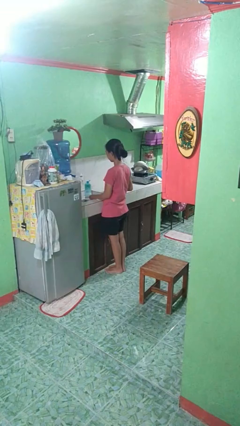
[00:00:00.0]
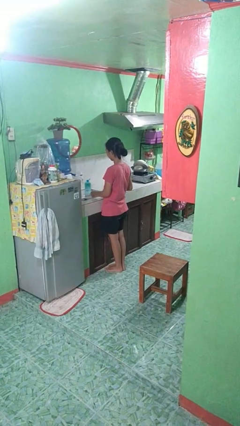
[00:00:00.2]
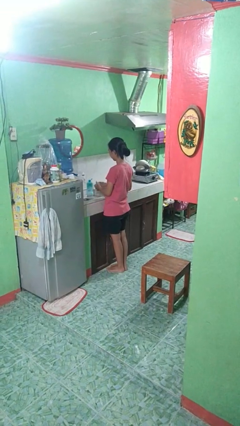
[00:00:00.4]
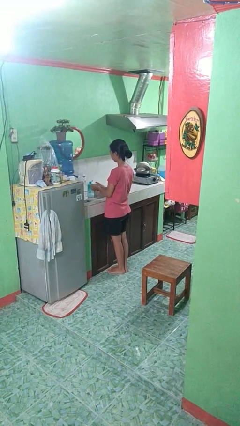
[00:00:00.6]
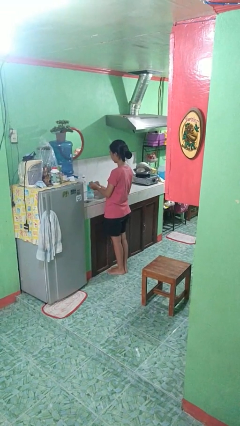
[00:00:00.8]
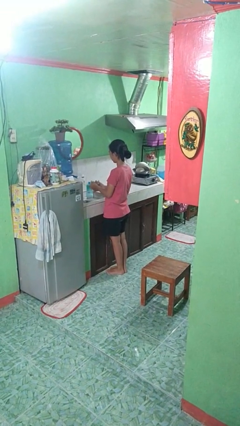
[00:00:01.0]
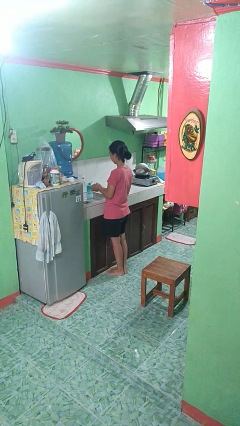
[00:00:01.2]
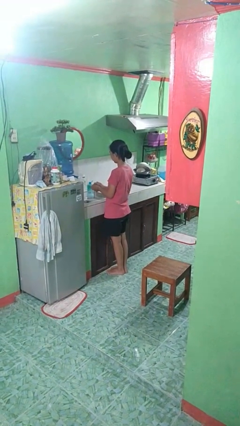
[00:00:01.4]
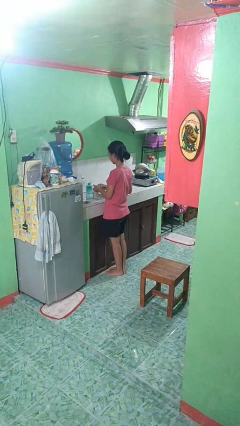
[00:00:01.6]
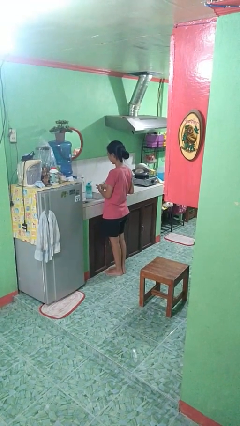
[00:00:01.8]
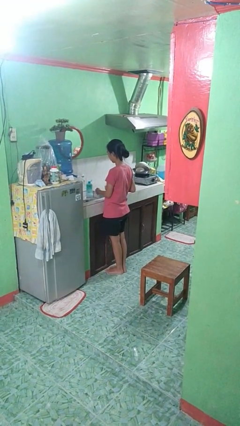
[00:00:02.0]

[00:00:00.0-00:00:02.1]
person dries hands with towel

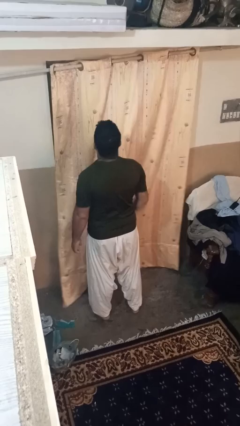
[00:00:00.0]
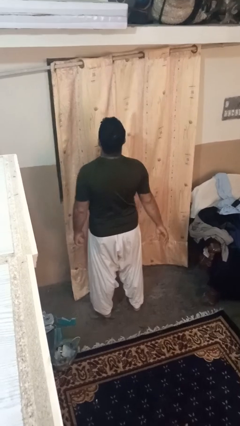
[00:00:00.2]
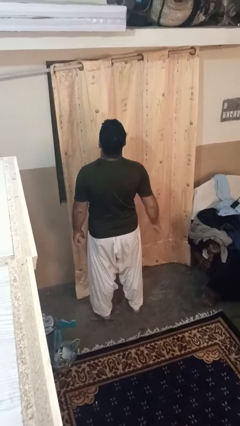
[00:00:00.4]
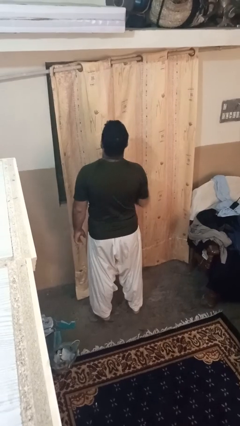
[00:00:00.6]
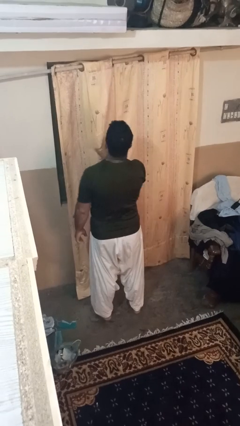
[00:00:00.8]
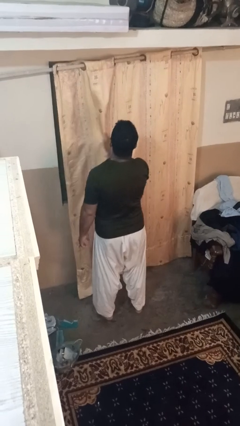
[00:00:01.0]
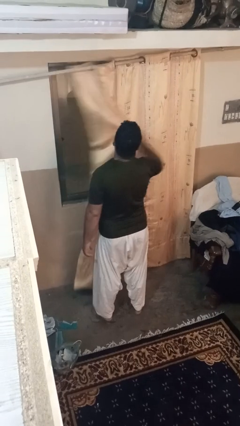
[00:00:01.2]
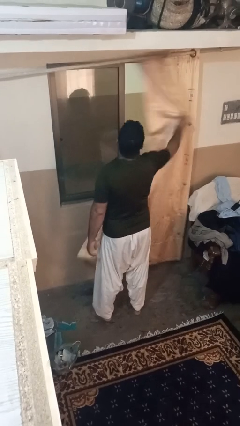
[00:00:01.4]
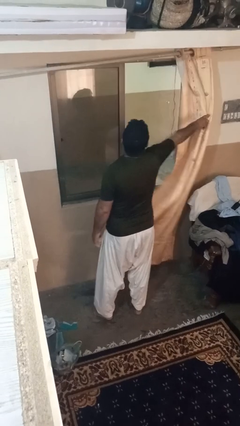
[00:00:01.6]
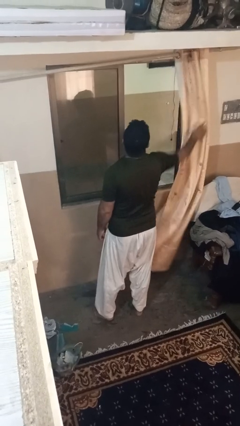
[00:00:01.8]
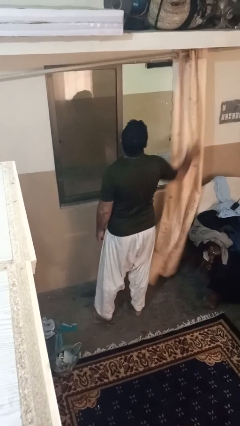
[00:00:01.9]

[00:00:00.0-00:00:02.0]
person opens curtains

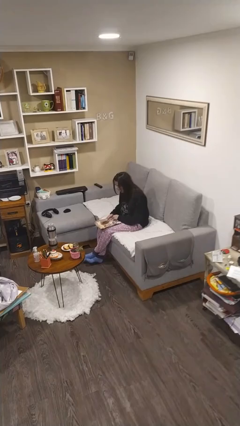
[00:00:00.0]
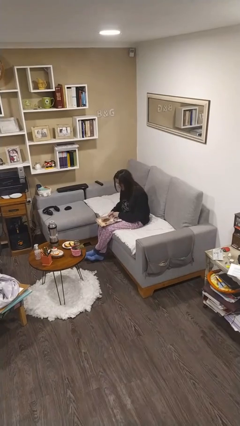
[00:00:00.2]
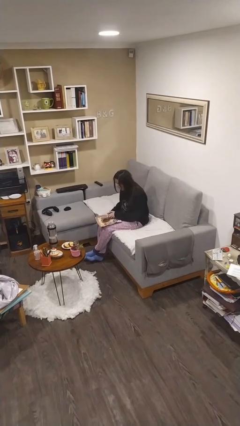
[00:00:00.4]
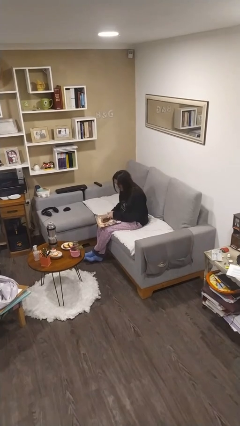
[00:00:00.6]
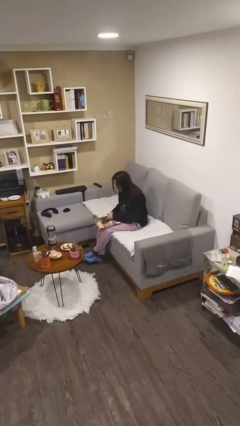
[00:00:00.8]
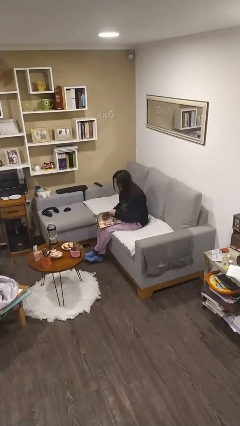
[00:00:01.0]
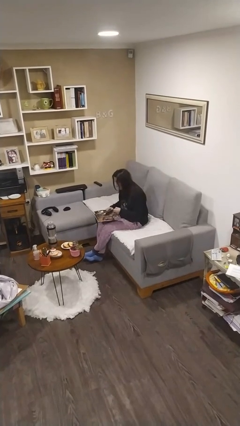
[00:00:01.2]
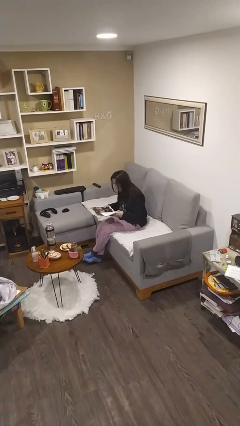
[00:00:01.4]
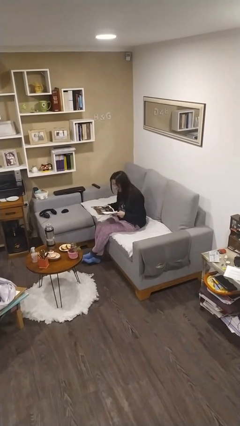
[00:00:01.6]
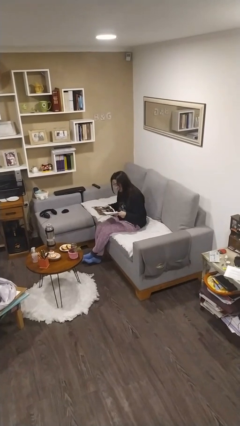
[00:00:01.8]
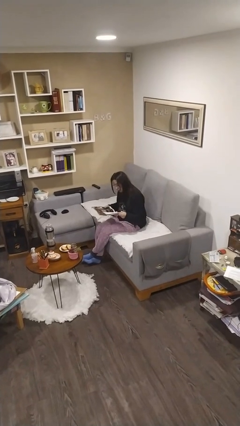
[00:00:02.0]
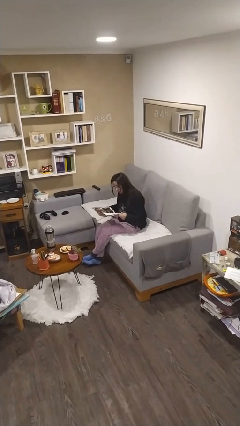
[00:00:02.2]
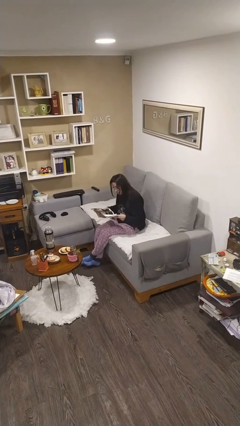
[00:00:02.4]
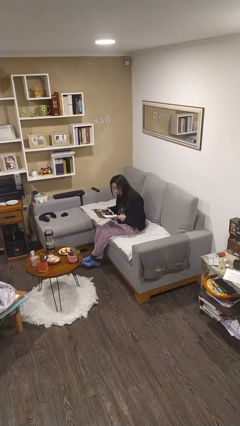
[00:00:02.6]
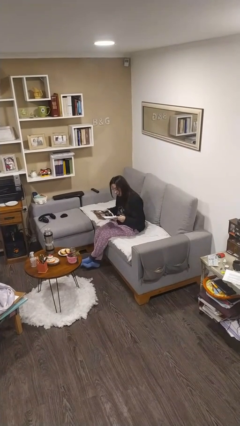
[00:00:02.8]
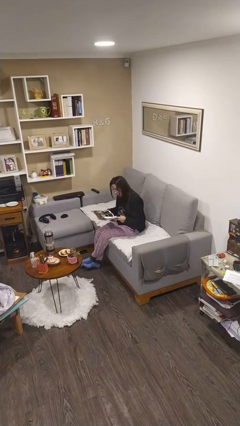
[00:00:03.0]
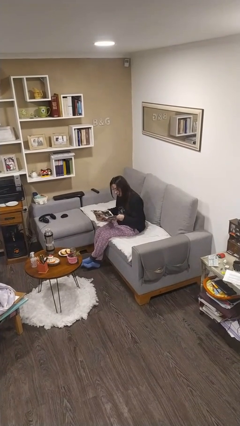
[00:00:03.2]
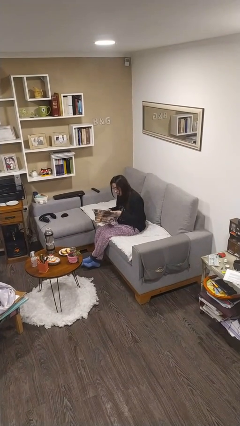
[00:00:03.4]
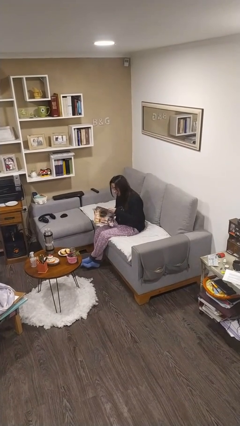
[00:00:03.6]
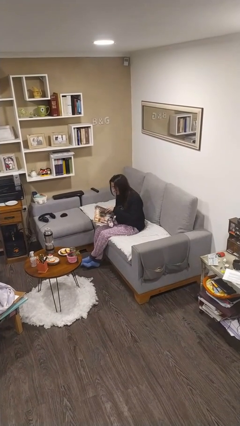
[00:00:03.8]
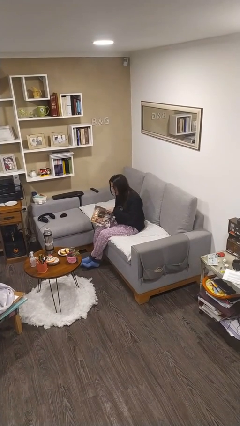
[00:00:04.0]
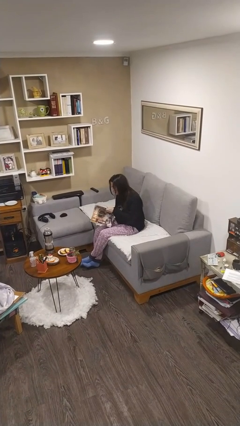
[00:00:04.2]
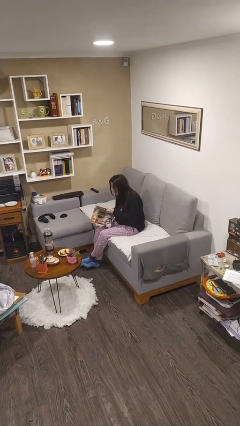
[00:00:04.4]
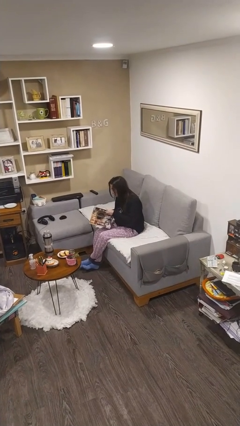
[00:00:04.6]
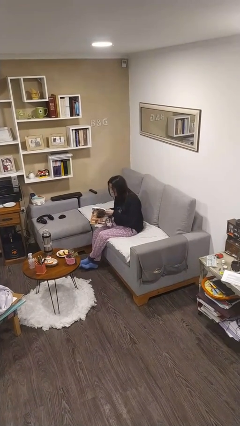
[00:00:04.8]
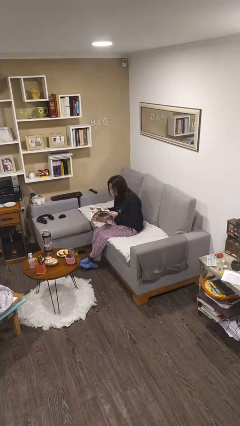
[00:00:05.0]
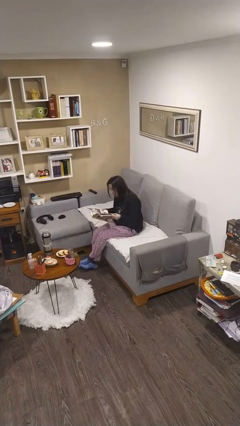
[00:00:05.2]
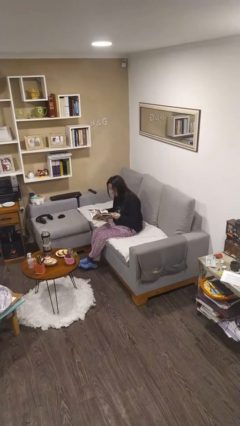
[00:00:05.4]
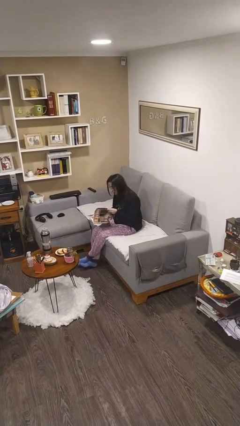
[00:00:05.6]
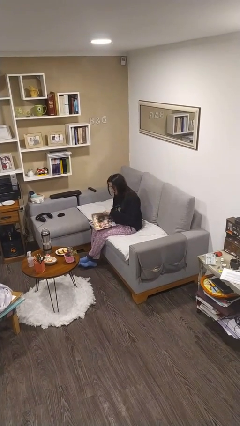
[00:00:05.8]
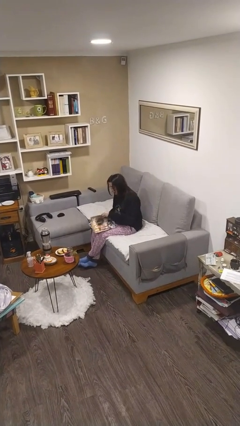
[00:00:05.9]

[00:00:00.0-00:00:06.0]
person reads magazine

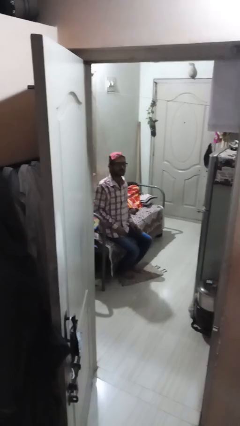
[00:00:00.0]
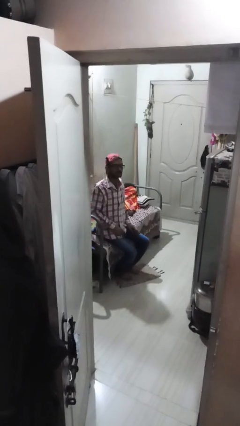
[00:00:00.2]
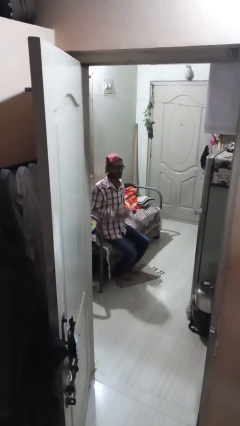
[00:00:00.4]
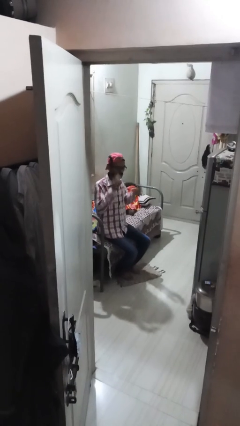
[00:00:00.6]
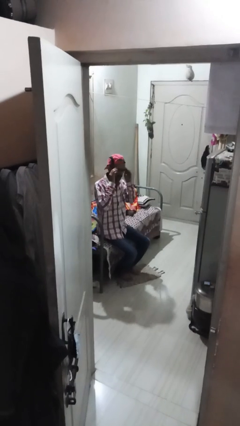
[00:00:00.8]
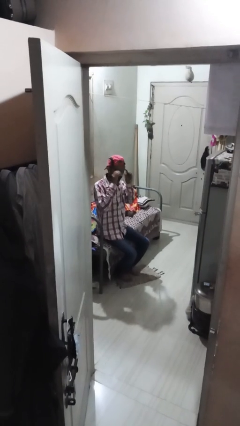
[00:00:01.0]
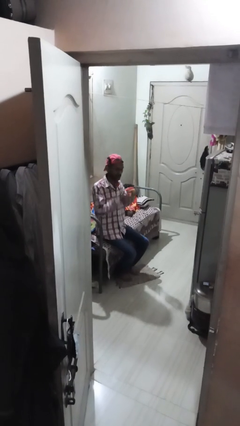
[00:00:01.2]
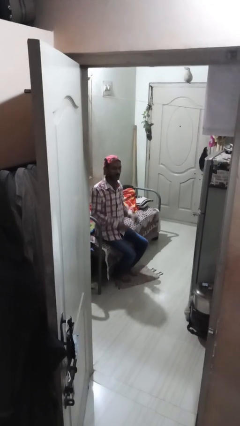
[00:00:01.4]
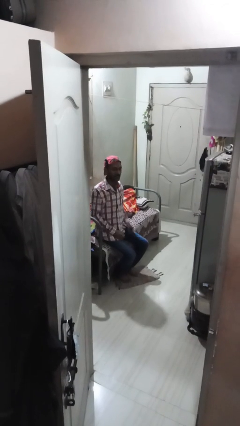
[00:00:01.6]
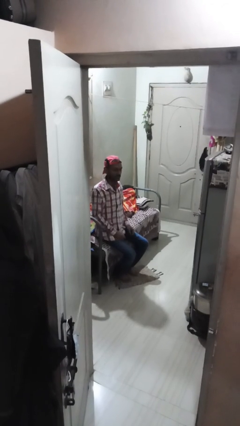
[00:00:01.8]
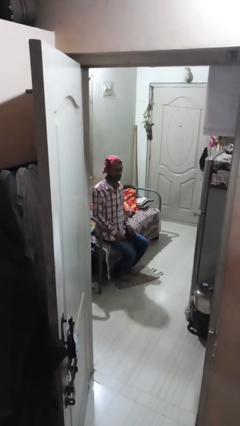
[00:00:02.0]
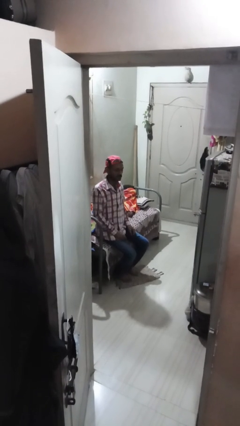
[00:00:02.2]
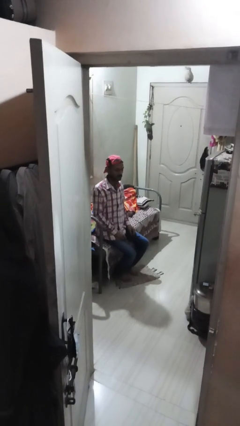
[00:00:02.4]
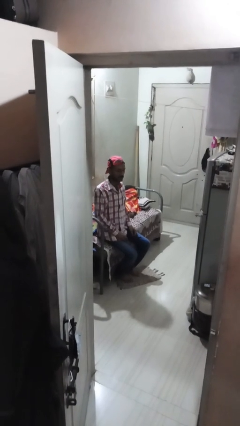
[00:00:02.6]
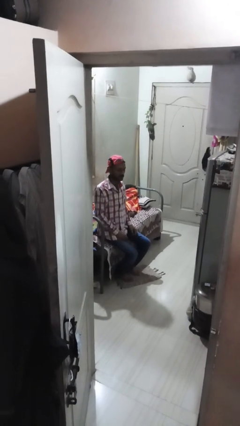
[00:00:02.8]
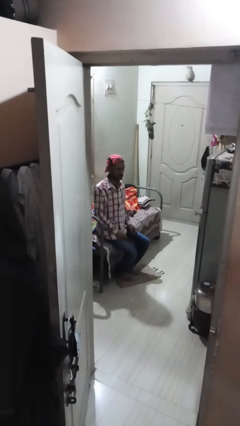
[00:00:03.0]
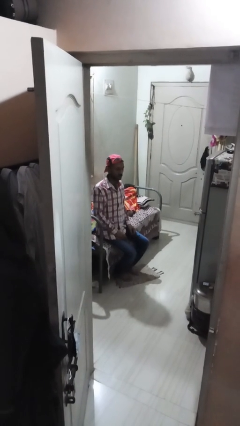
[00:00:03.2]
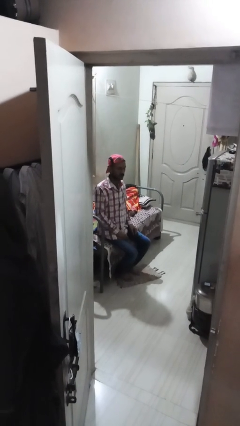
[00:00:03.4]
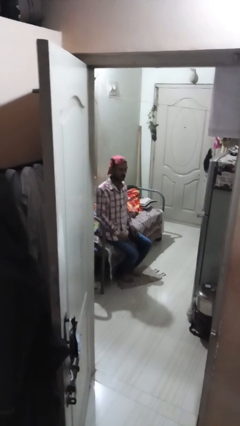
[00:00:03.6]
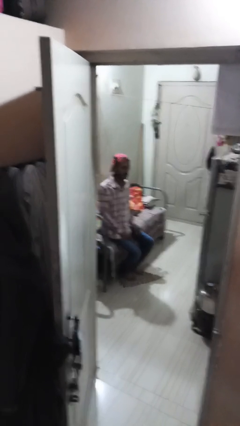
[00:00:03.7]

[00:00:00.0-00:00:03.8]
person takes off glasses

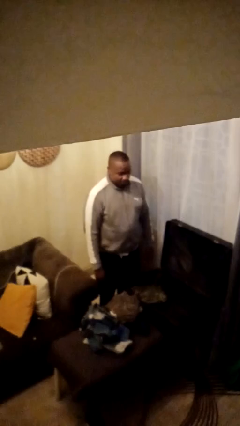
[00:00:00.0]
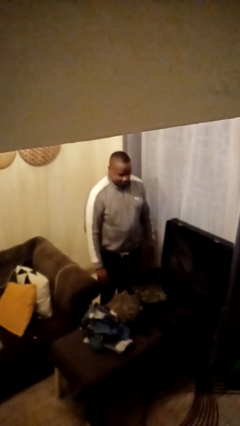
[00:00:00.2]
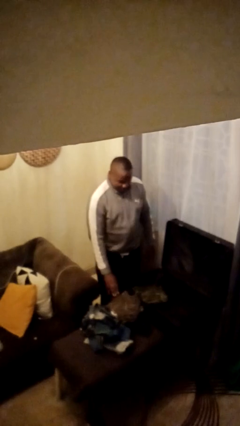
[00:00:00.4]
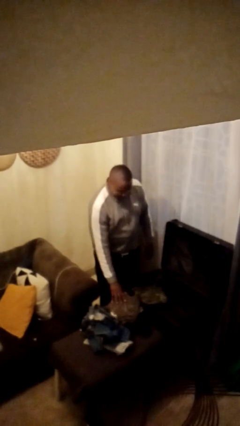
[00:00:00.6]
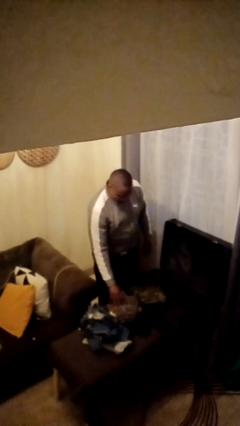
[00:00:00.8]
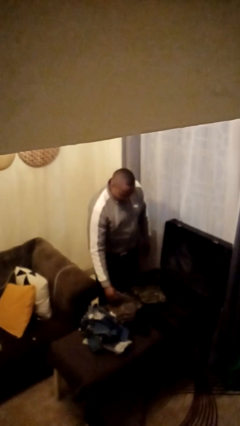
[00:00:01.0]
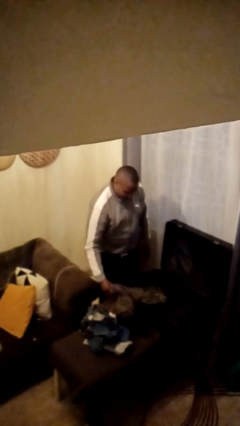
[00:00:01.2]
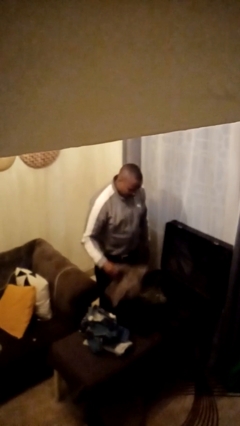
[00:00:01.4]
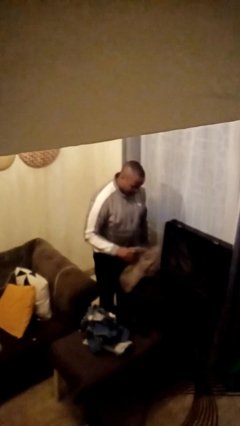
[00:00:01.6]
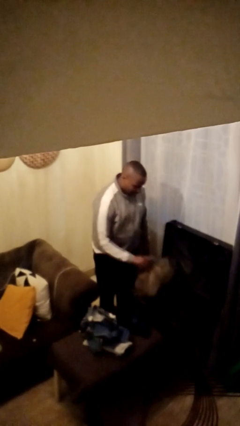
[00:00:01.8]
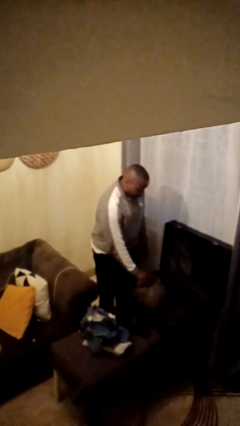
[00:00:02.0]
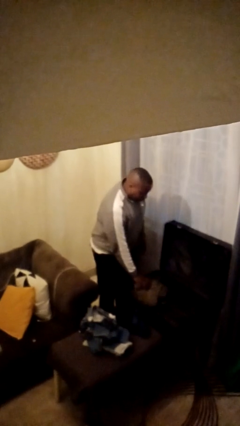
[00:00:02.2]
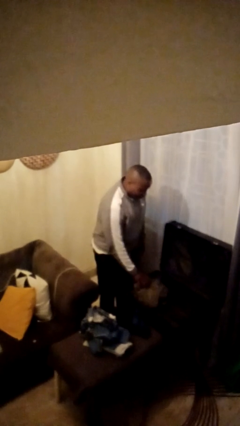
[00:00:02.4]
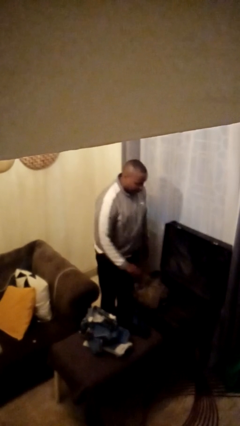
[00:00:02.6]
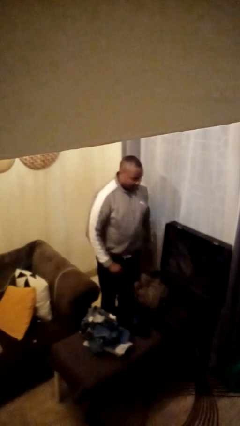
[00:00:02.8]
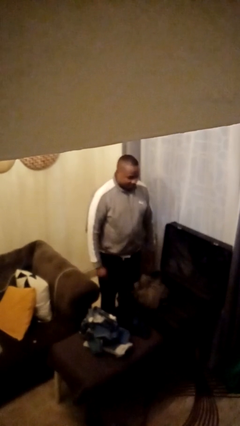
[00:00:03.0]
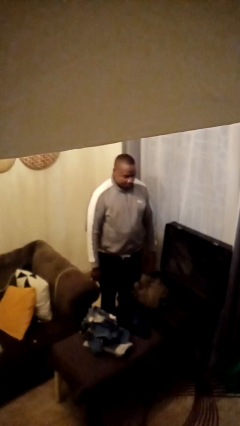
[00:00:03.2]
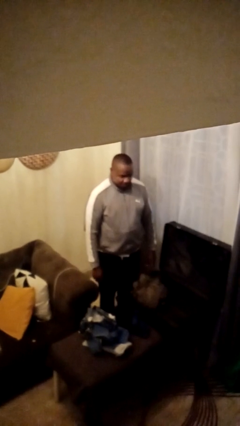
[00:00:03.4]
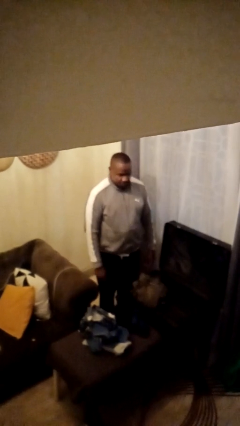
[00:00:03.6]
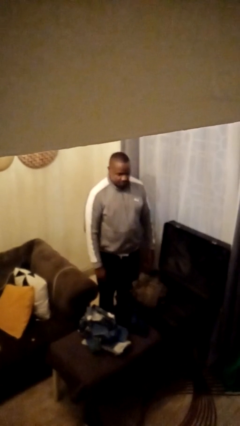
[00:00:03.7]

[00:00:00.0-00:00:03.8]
person loads clothes into suitcase
